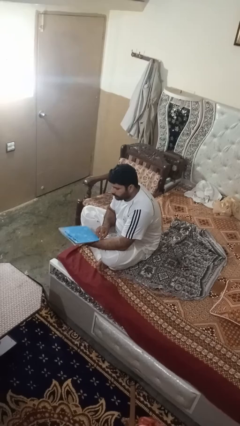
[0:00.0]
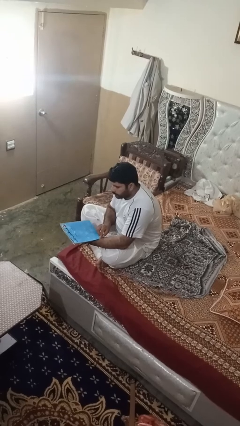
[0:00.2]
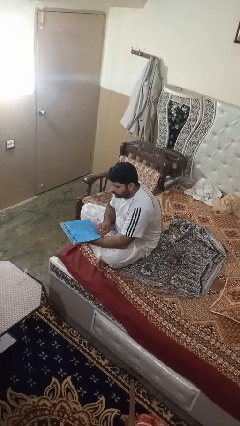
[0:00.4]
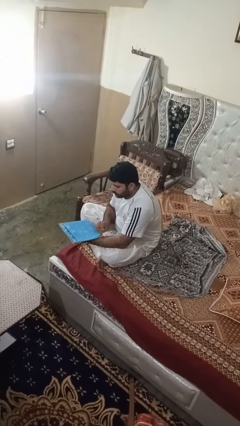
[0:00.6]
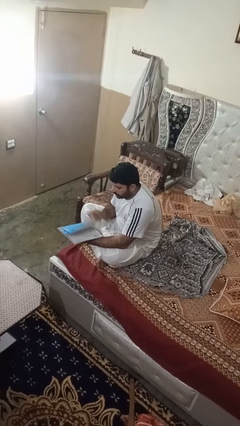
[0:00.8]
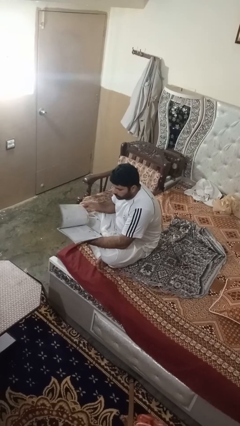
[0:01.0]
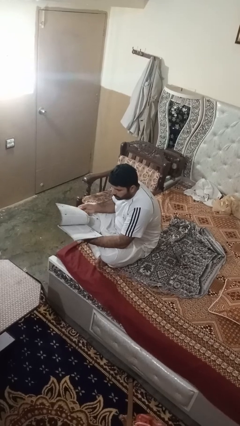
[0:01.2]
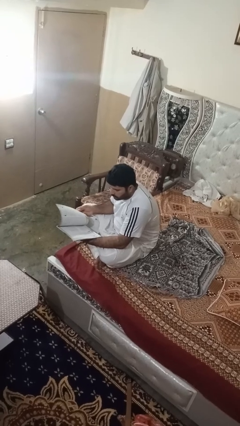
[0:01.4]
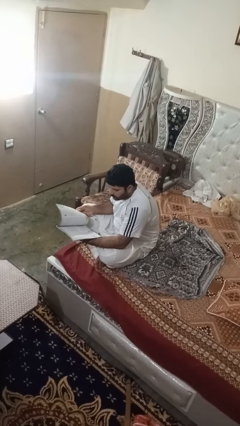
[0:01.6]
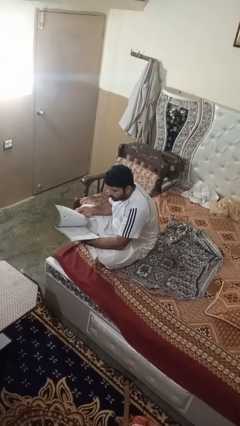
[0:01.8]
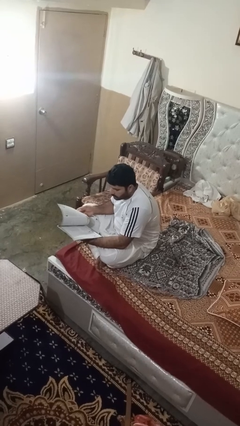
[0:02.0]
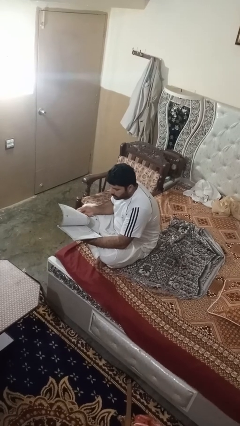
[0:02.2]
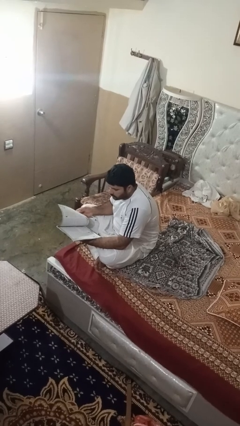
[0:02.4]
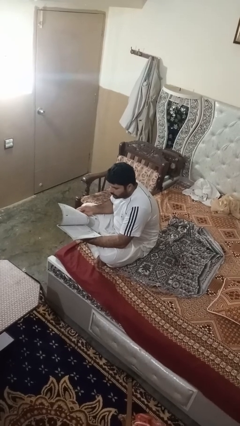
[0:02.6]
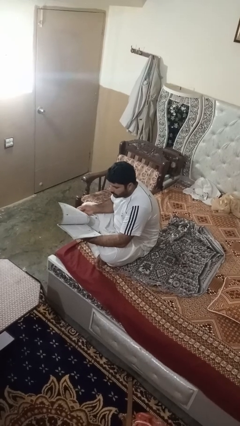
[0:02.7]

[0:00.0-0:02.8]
person reads magazine

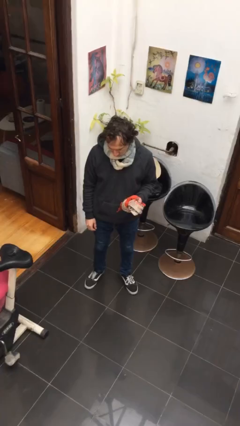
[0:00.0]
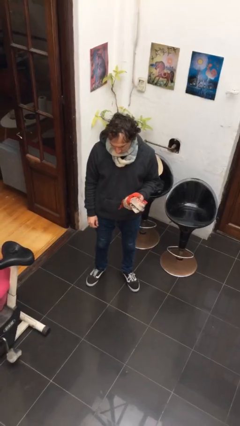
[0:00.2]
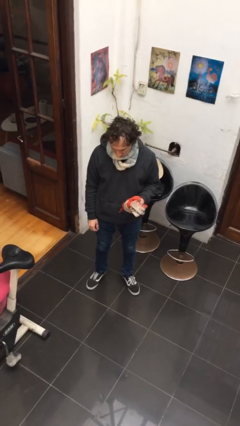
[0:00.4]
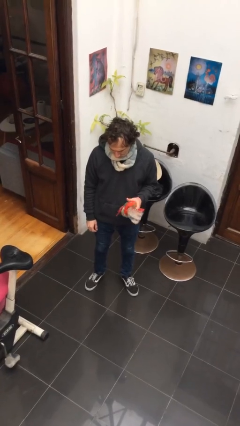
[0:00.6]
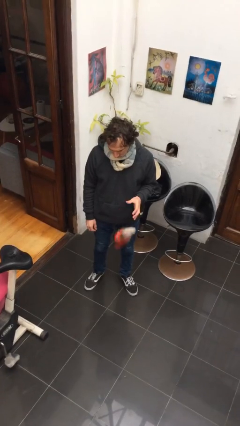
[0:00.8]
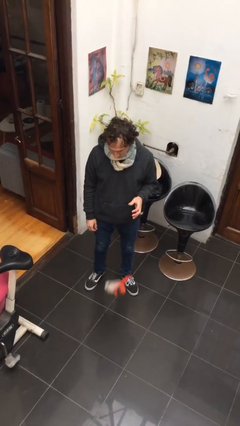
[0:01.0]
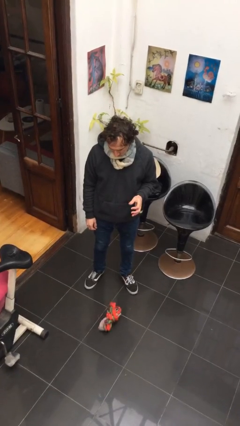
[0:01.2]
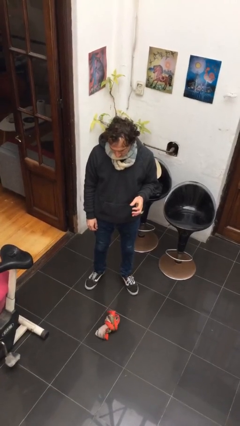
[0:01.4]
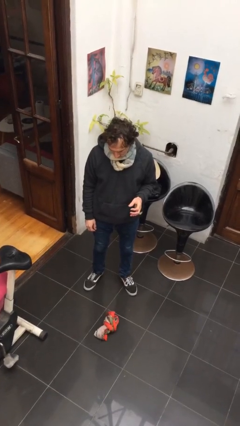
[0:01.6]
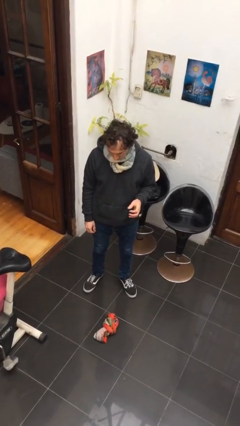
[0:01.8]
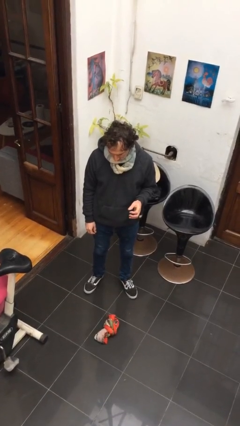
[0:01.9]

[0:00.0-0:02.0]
person drops object

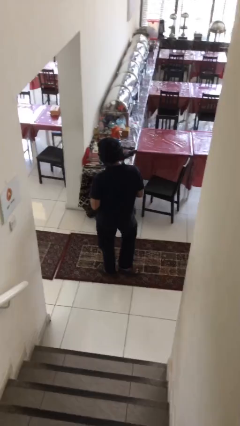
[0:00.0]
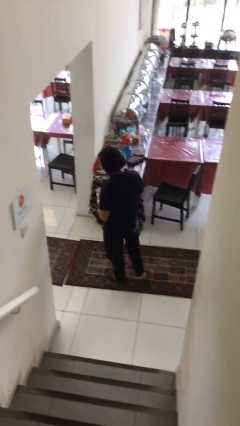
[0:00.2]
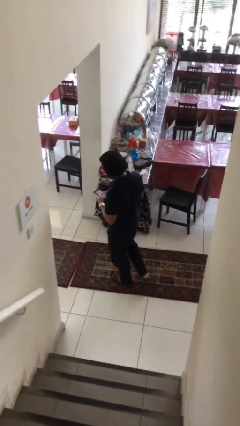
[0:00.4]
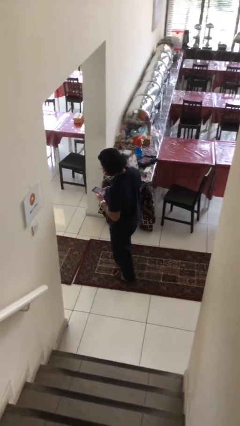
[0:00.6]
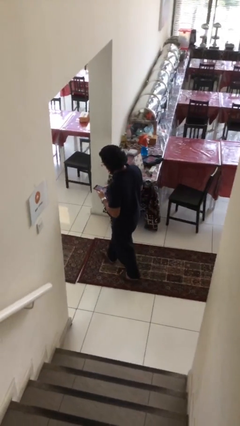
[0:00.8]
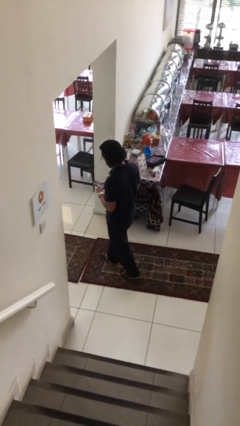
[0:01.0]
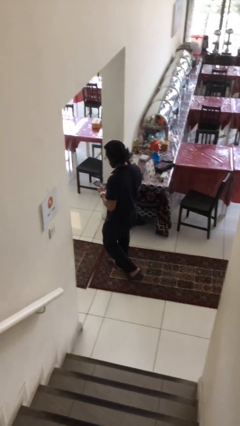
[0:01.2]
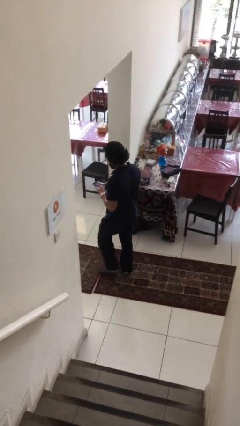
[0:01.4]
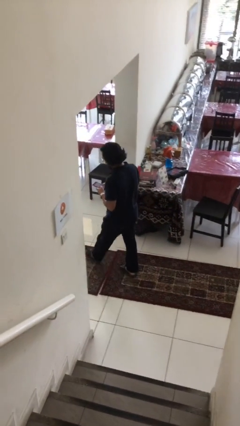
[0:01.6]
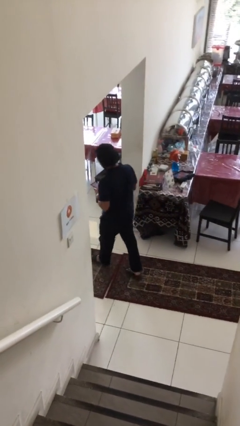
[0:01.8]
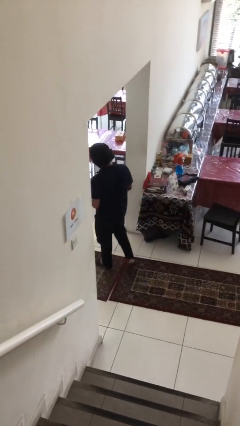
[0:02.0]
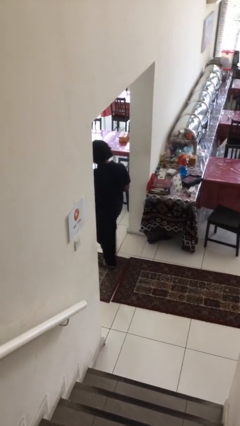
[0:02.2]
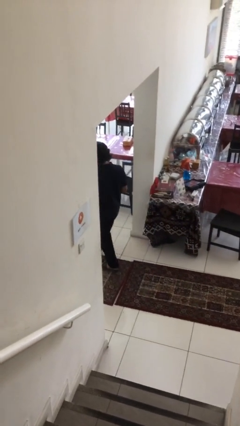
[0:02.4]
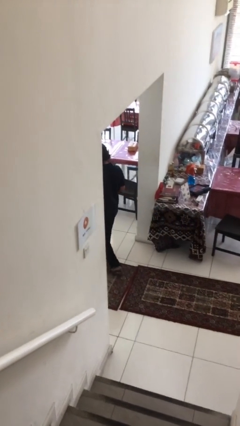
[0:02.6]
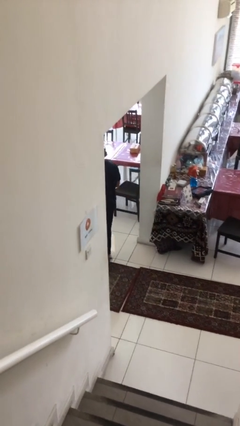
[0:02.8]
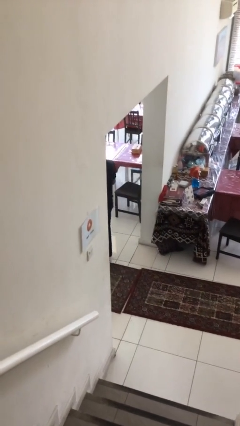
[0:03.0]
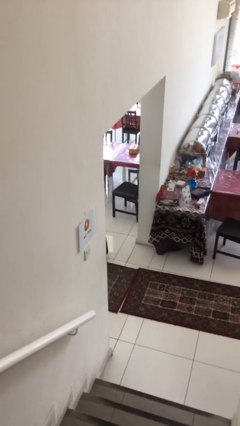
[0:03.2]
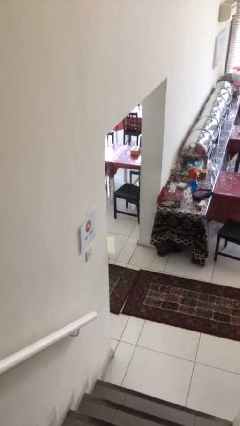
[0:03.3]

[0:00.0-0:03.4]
person exits scene through structure

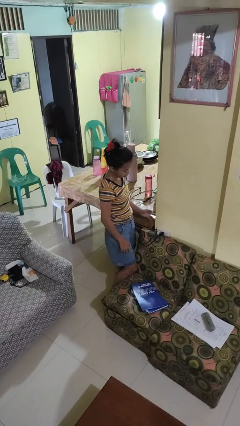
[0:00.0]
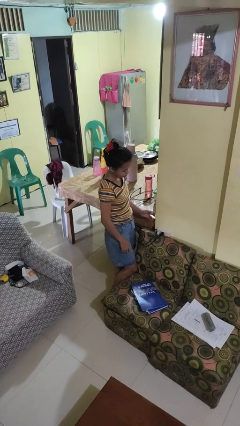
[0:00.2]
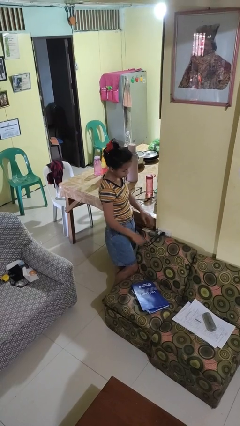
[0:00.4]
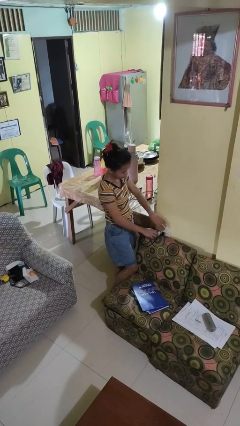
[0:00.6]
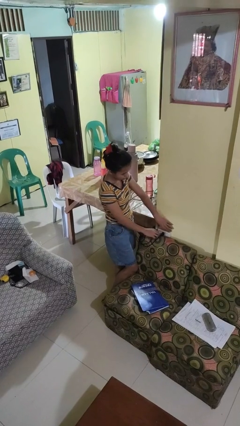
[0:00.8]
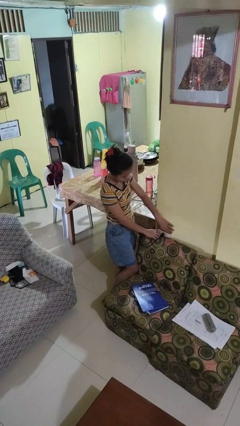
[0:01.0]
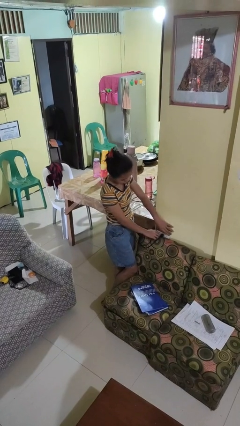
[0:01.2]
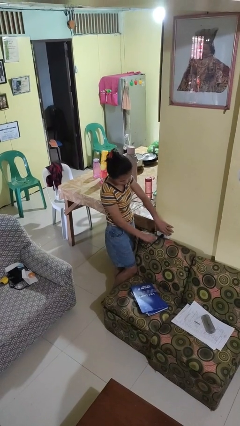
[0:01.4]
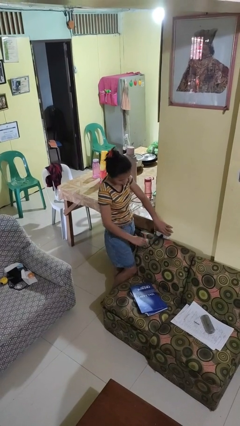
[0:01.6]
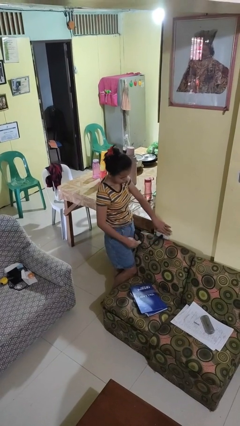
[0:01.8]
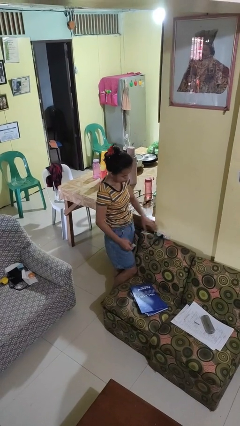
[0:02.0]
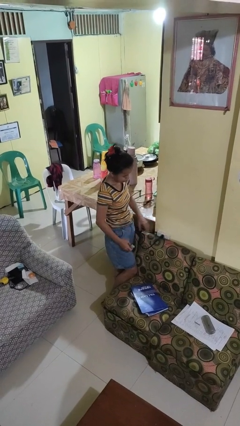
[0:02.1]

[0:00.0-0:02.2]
person unplugs from electrical socket

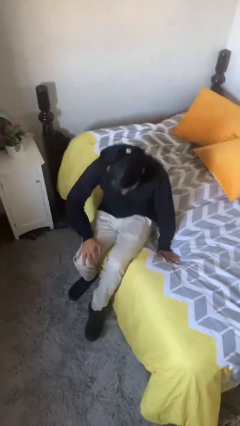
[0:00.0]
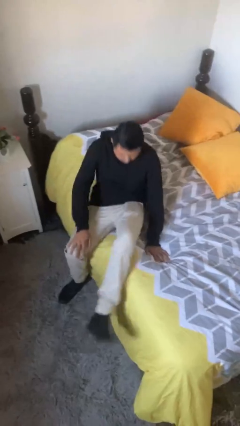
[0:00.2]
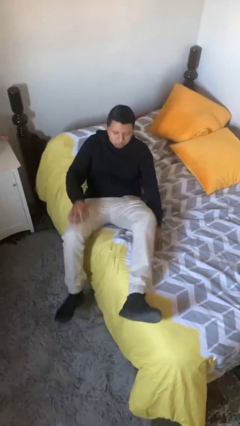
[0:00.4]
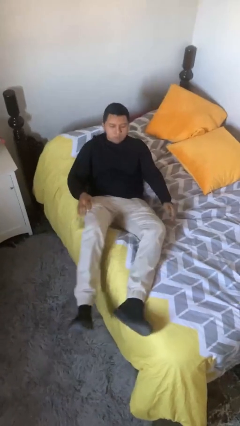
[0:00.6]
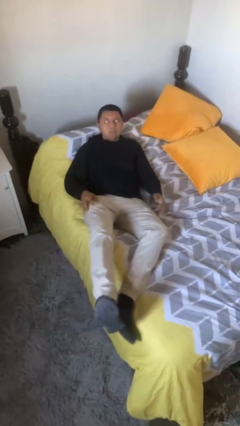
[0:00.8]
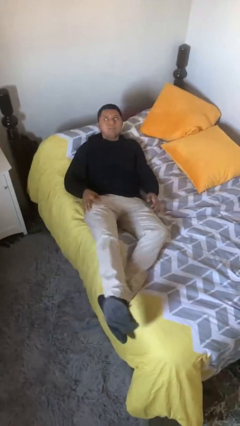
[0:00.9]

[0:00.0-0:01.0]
person lies down on bed

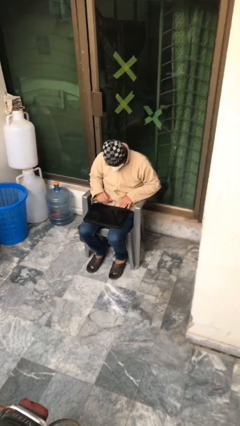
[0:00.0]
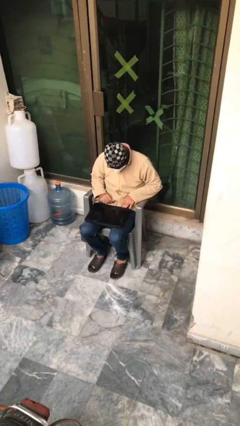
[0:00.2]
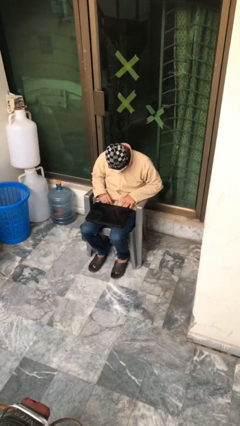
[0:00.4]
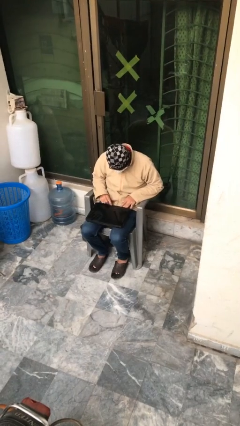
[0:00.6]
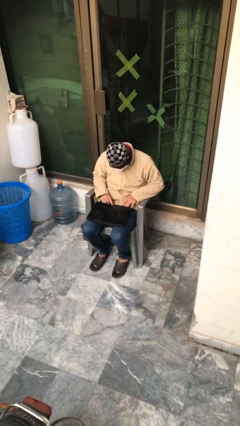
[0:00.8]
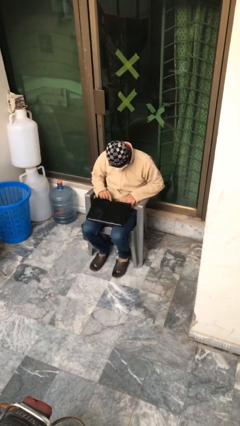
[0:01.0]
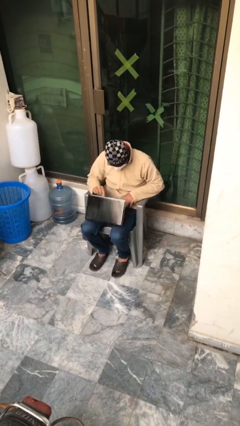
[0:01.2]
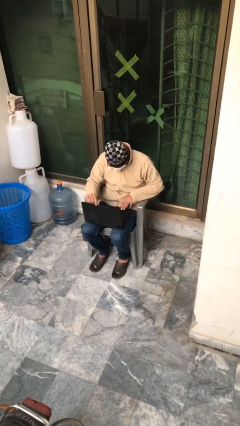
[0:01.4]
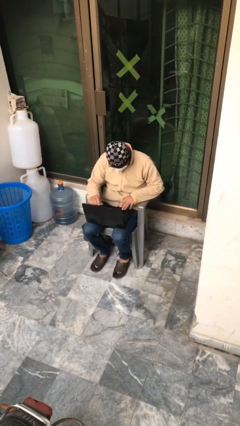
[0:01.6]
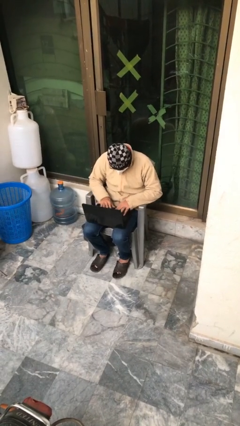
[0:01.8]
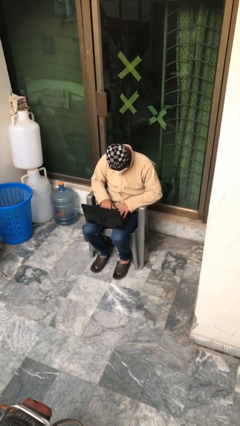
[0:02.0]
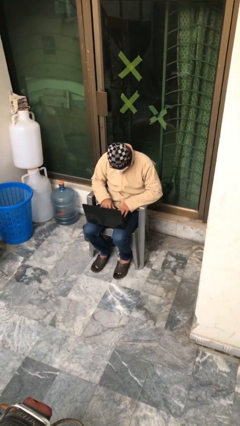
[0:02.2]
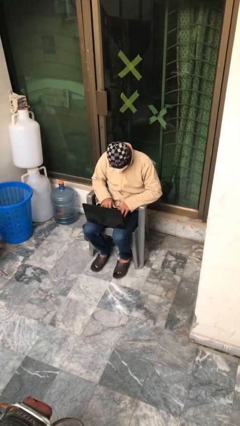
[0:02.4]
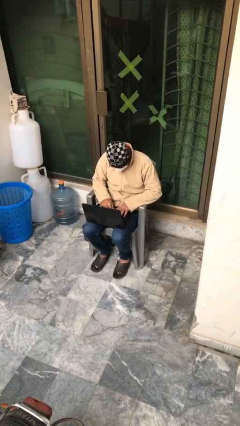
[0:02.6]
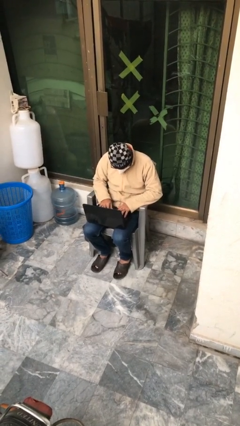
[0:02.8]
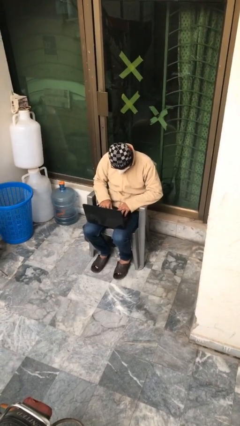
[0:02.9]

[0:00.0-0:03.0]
person interacts with laptop

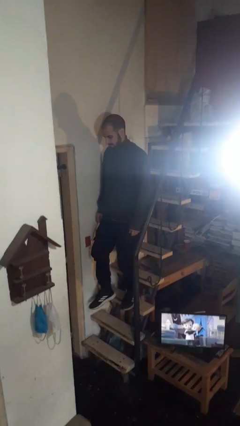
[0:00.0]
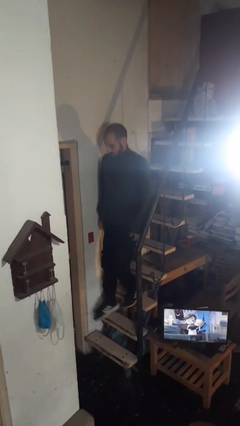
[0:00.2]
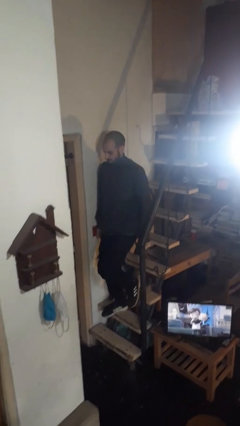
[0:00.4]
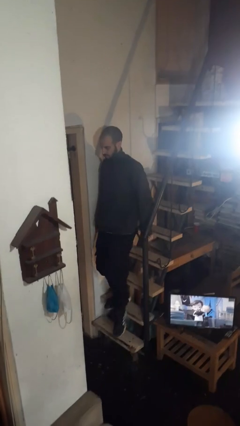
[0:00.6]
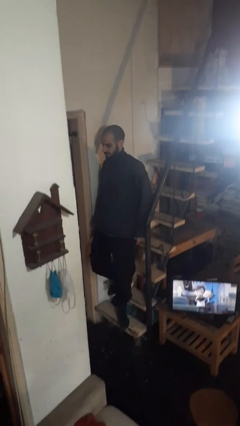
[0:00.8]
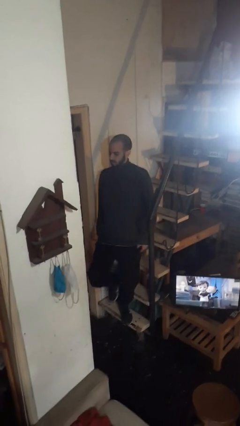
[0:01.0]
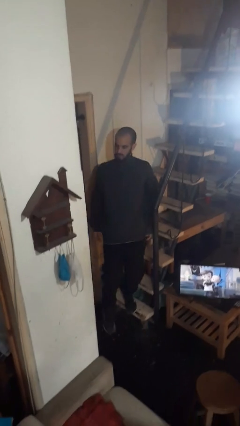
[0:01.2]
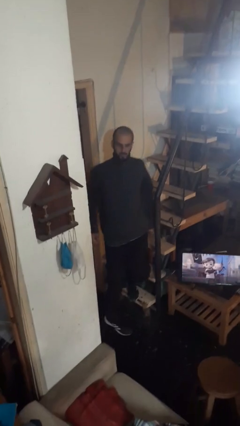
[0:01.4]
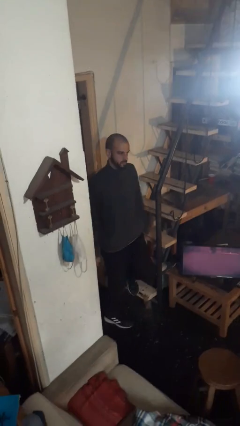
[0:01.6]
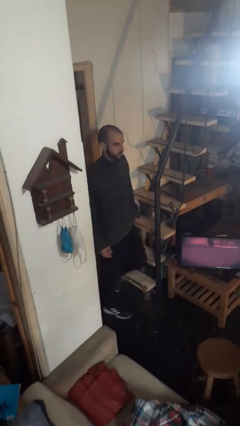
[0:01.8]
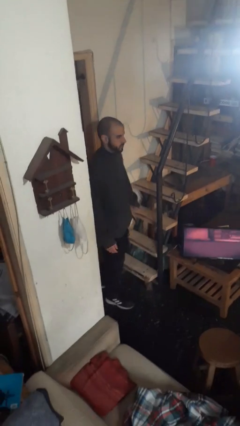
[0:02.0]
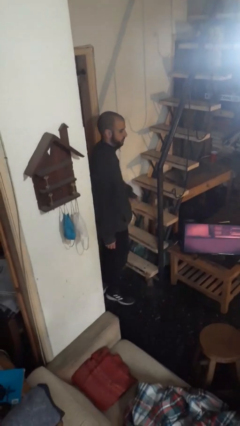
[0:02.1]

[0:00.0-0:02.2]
person climbs down stairs
